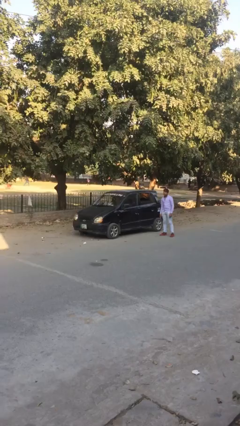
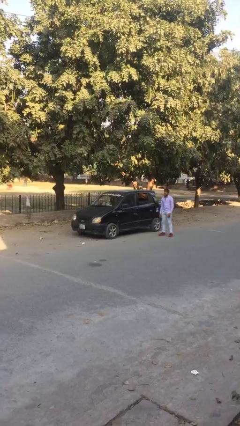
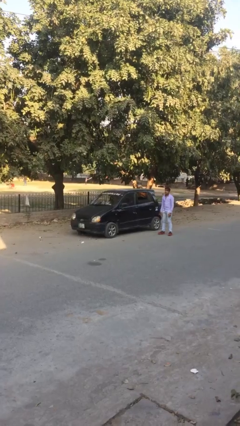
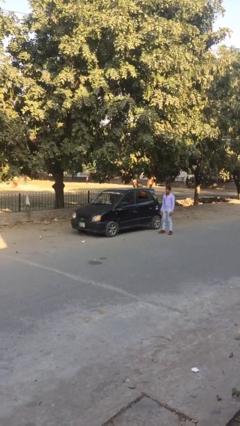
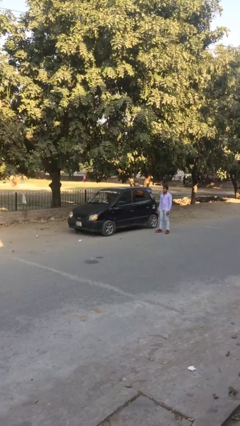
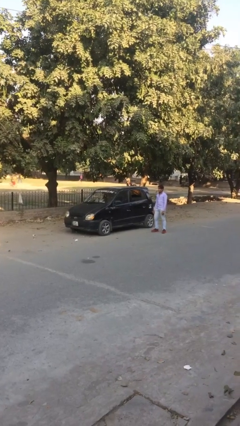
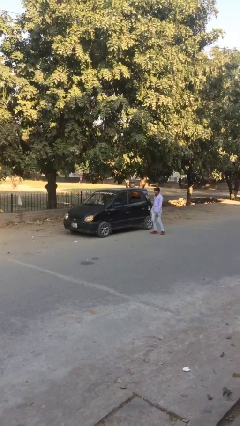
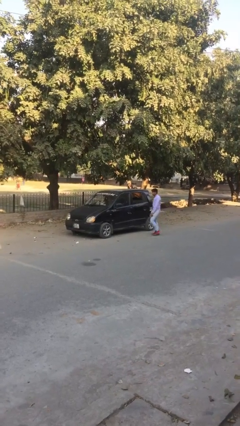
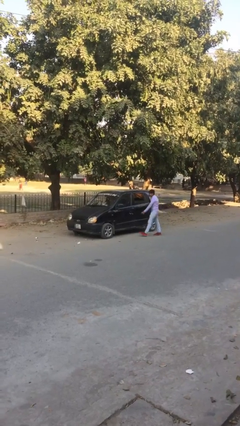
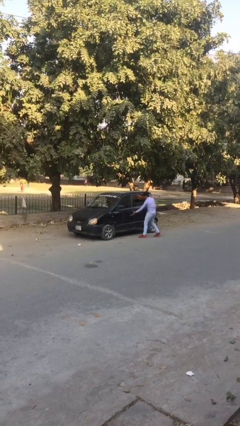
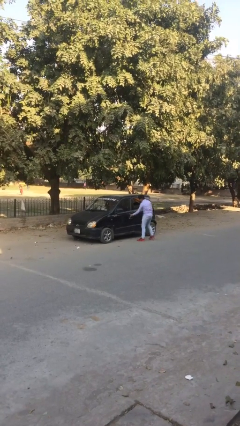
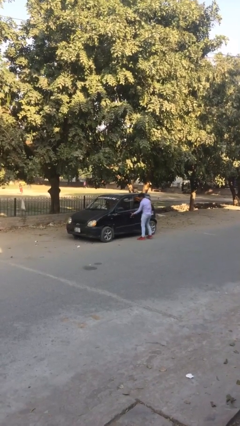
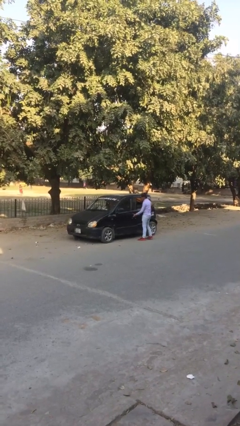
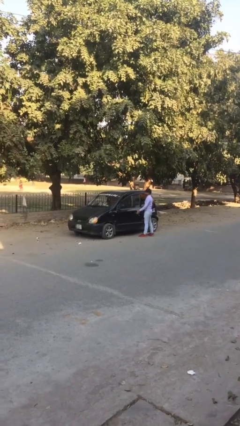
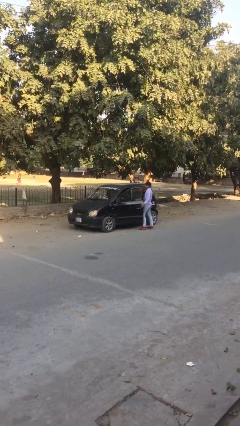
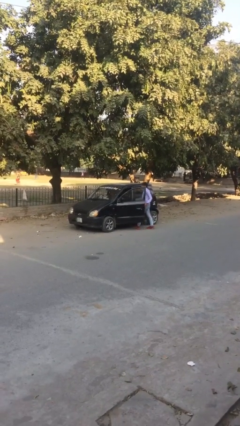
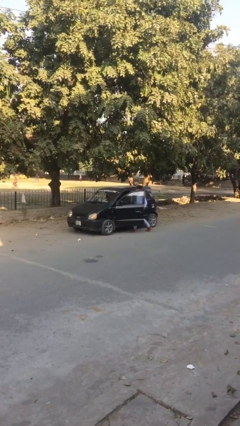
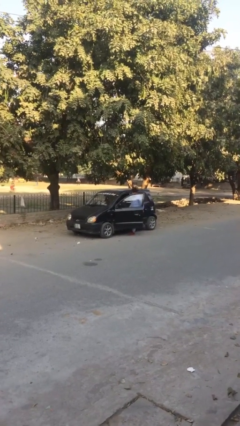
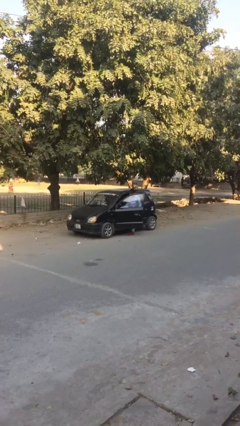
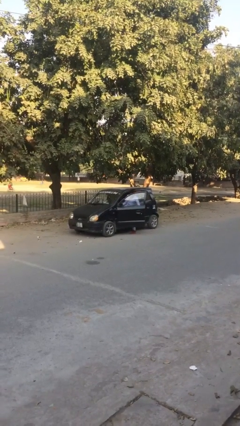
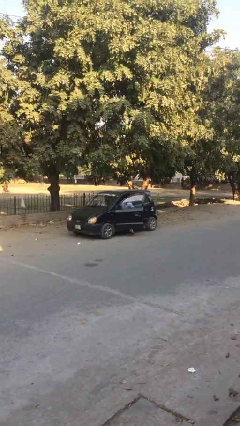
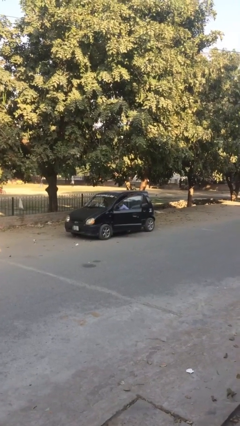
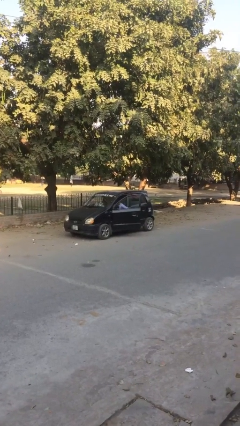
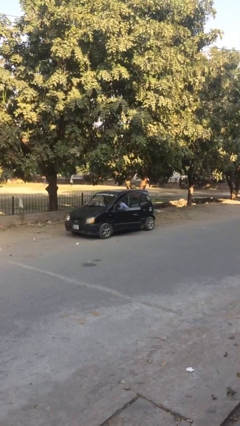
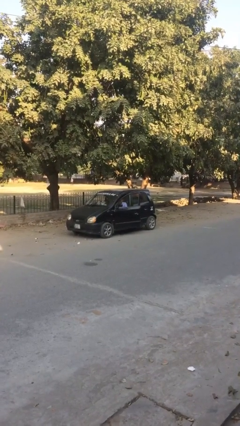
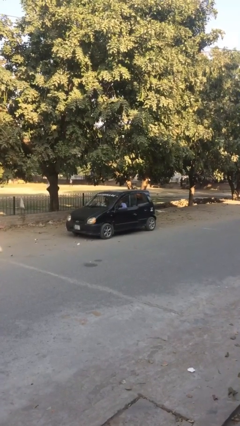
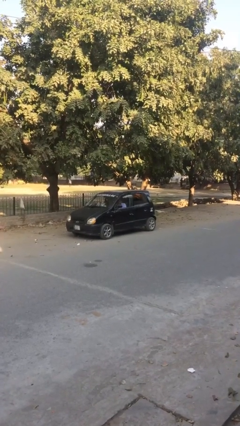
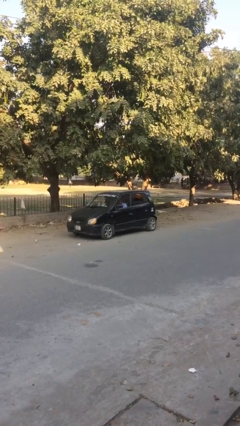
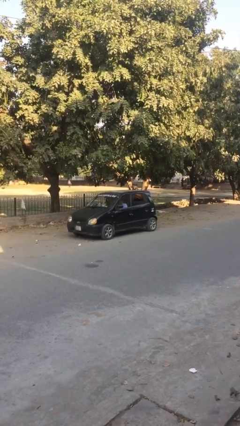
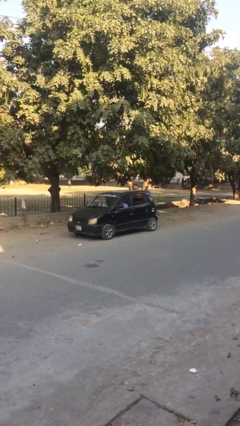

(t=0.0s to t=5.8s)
car picks up person

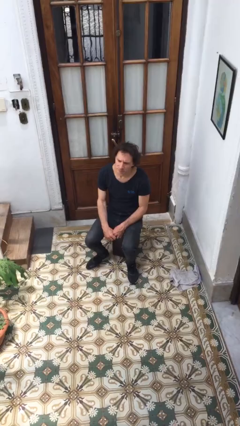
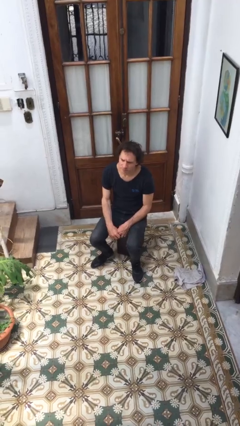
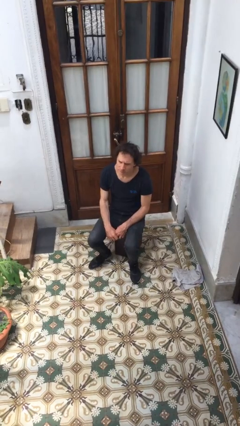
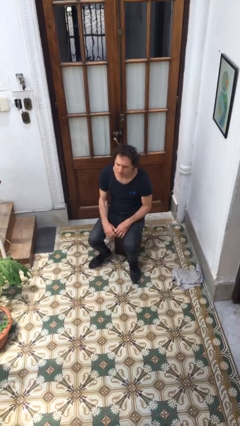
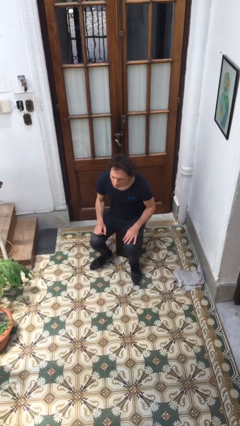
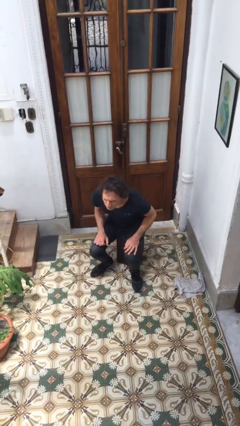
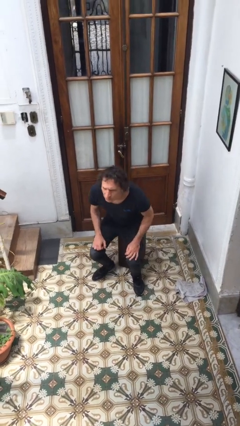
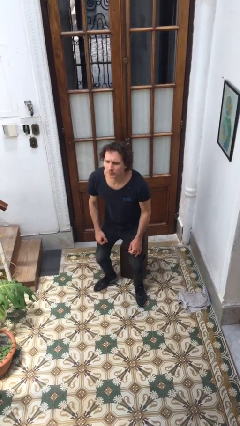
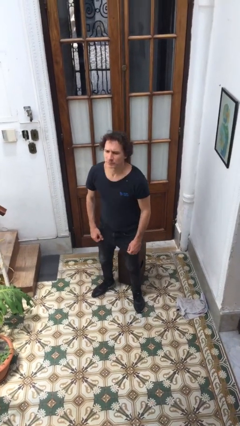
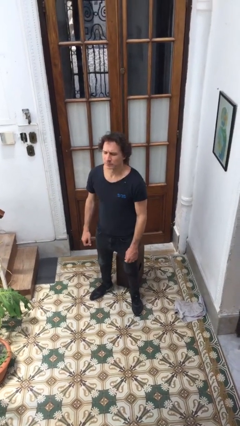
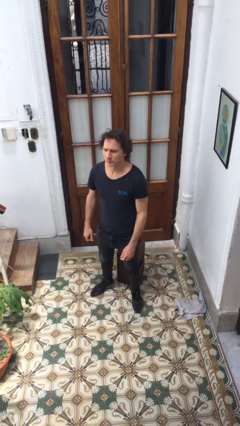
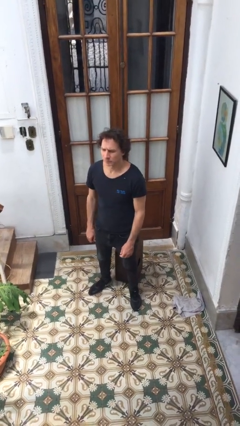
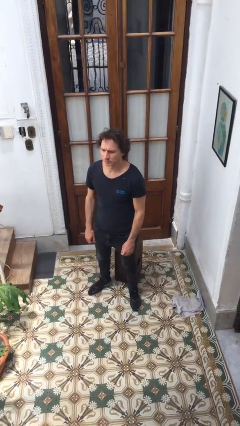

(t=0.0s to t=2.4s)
person stands up

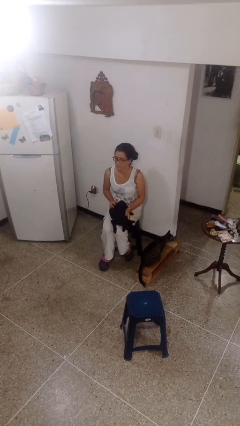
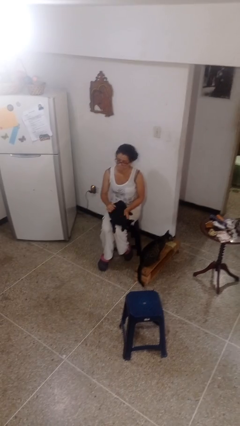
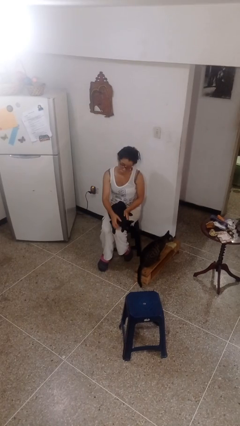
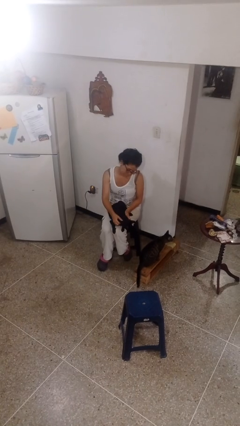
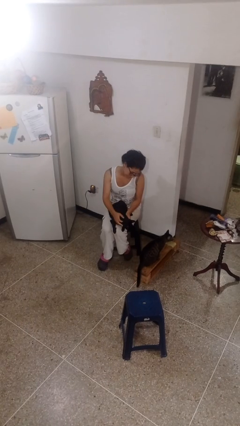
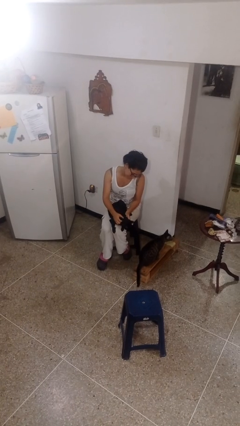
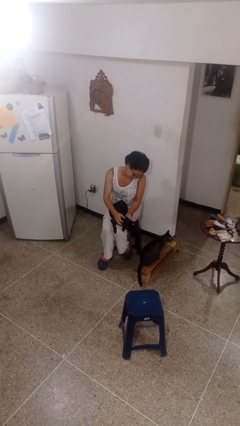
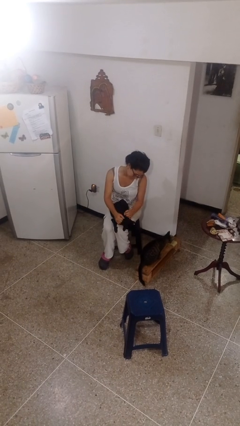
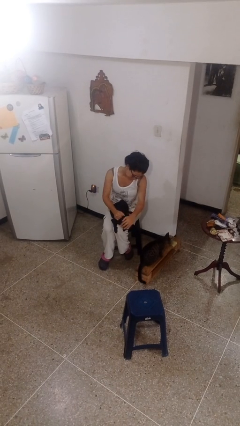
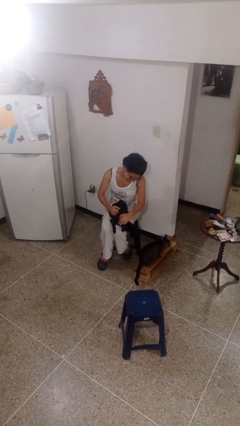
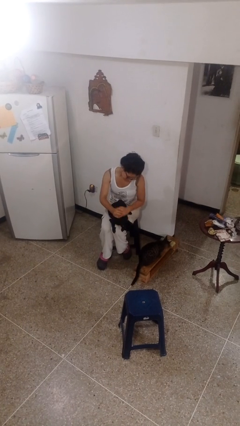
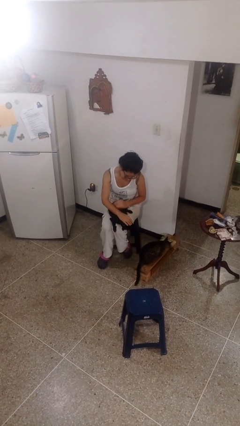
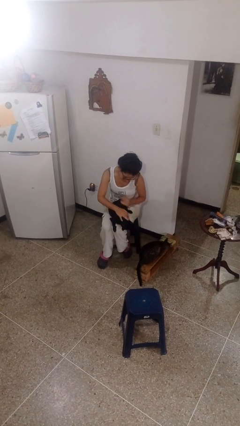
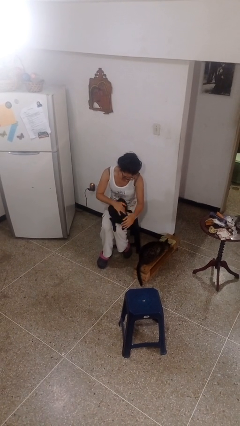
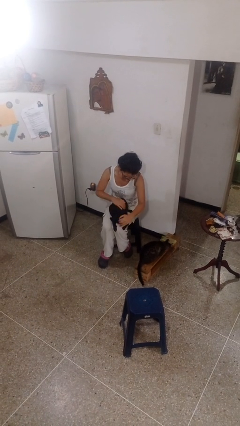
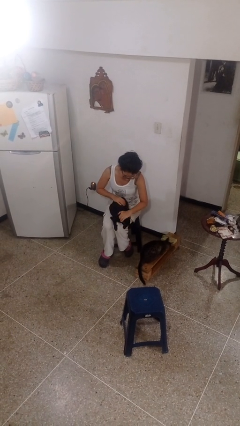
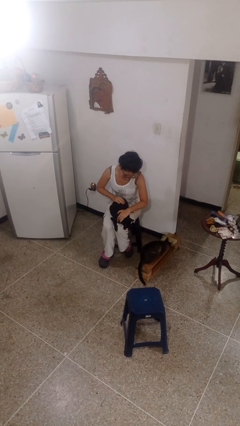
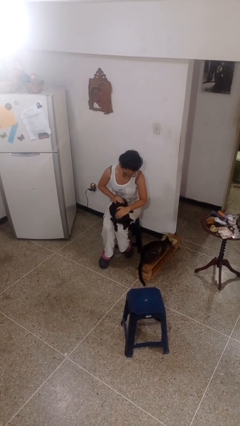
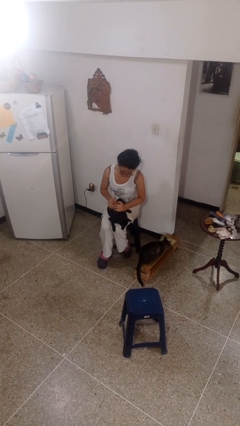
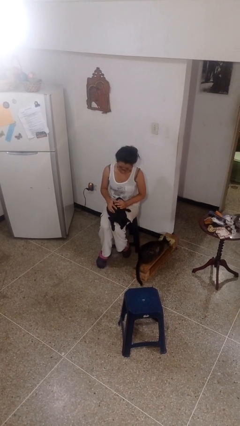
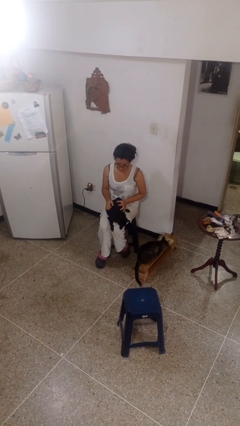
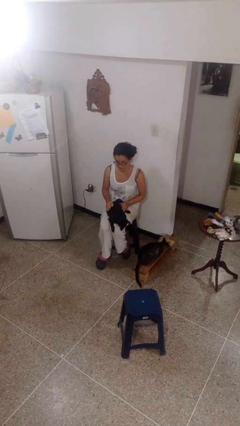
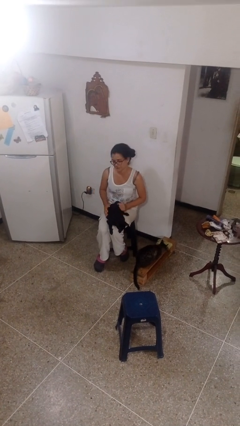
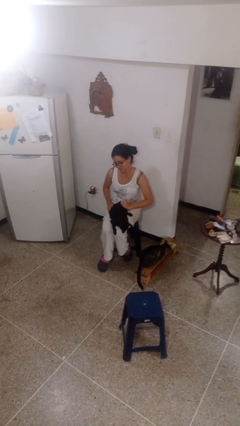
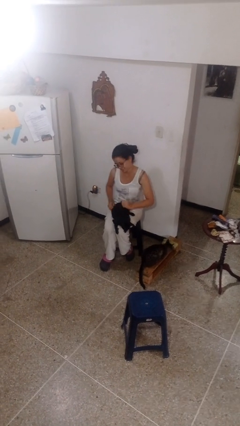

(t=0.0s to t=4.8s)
person pets cat

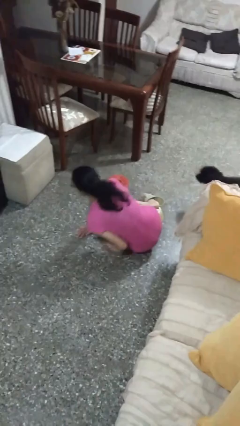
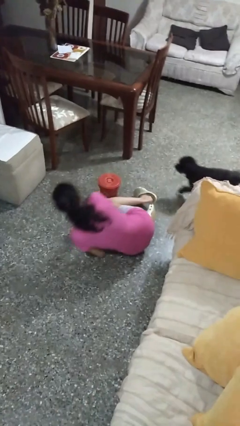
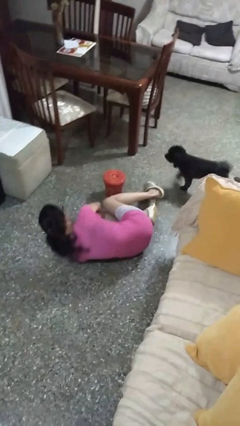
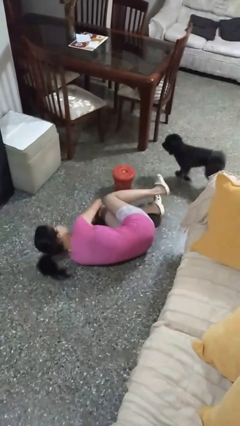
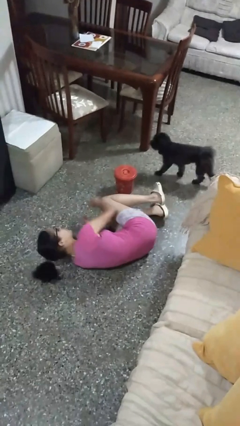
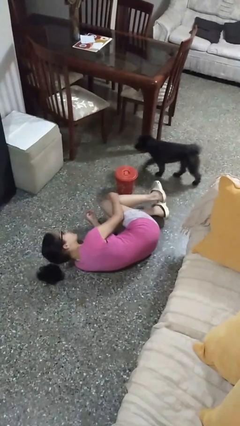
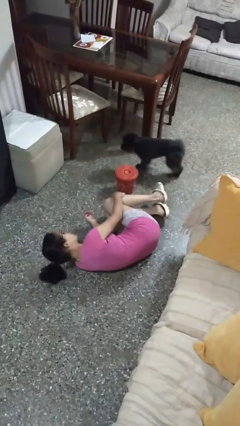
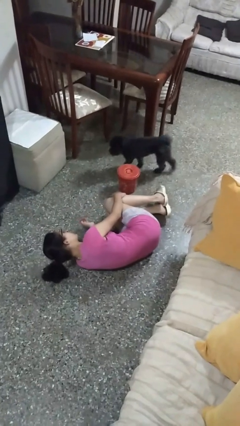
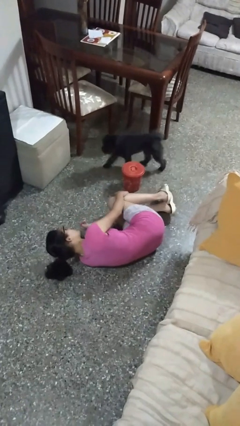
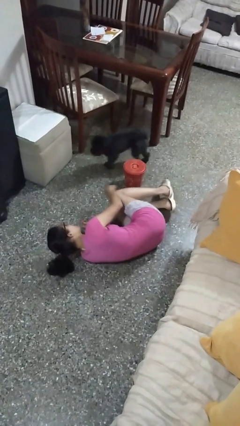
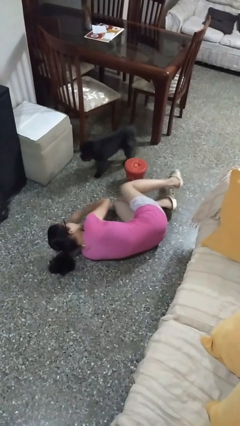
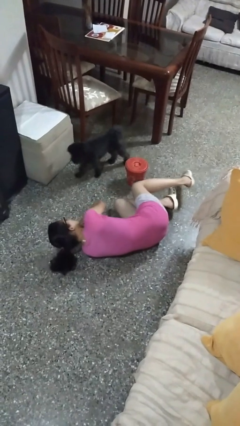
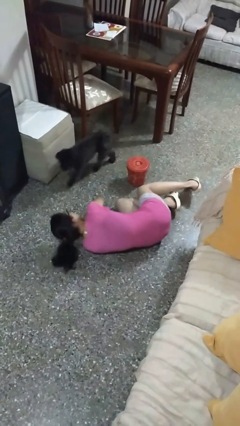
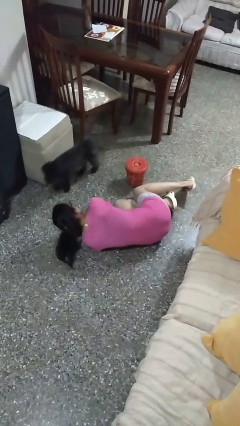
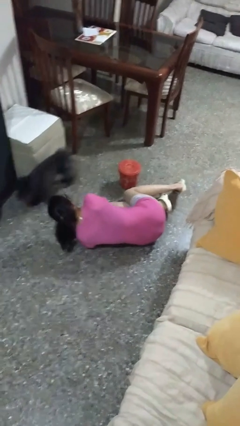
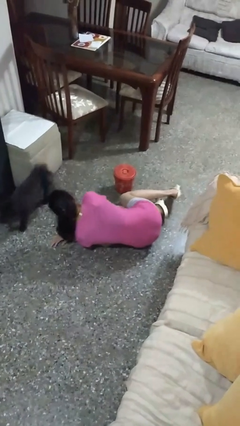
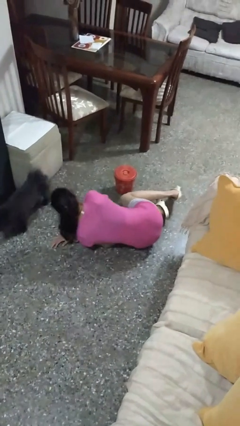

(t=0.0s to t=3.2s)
person lies down on floor

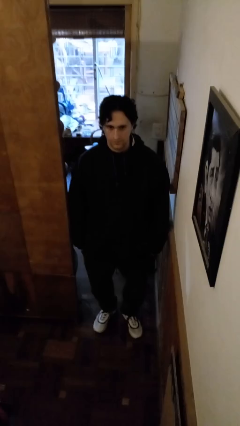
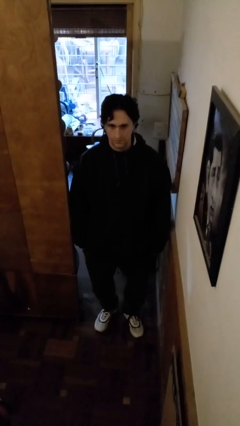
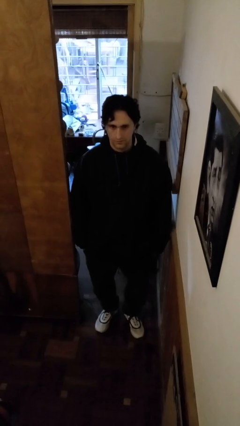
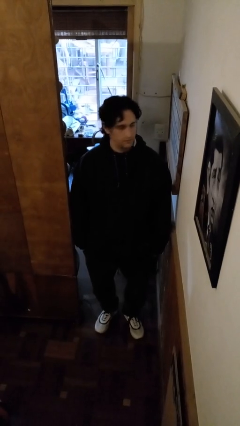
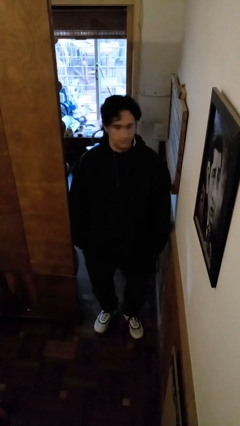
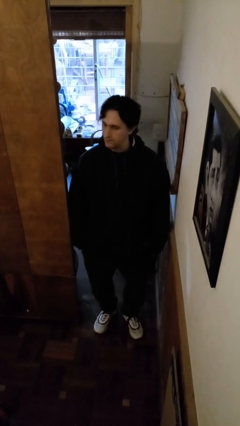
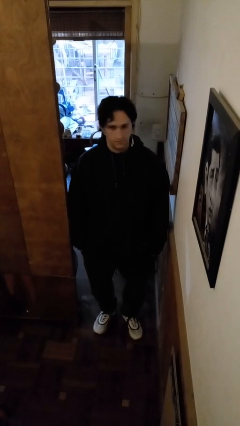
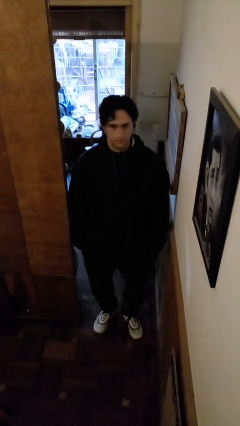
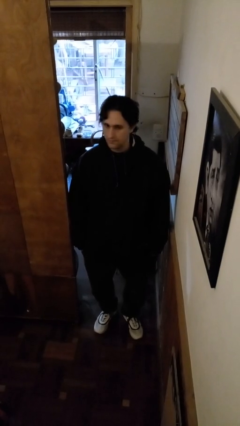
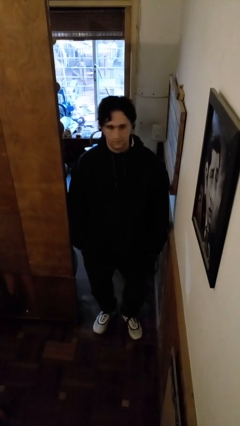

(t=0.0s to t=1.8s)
person shakes head
